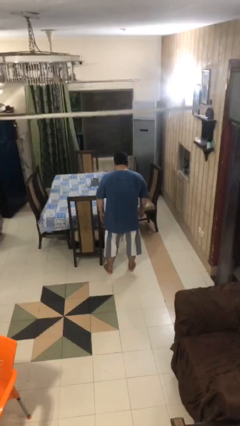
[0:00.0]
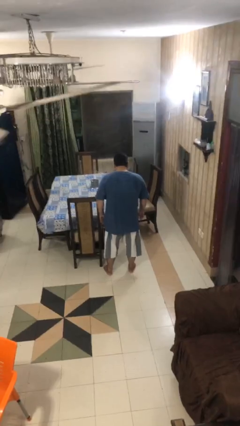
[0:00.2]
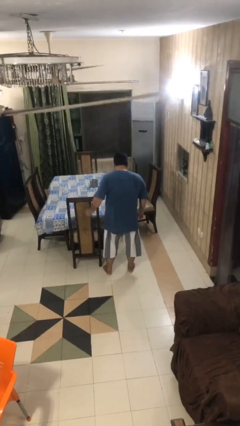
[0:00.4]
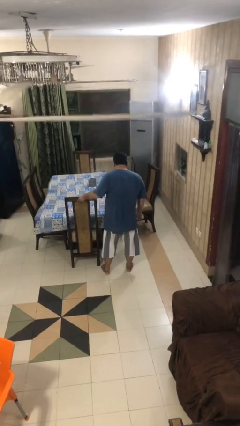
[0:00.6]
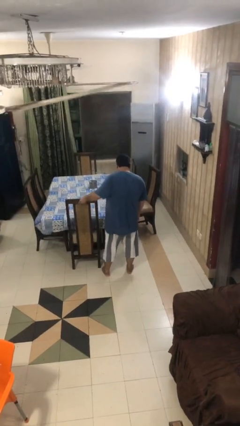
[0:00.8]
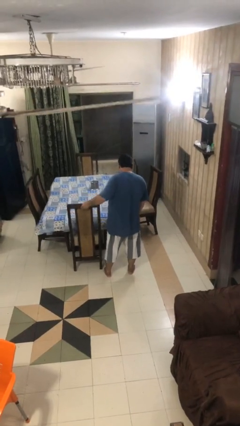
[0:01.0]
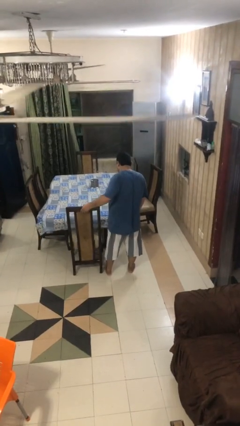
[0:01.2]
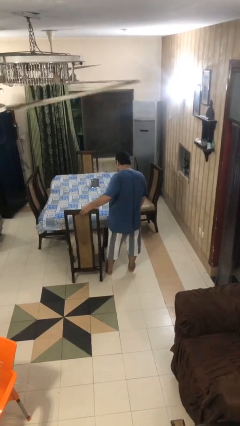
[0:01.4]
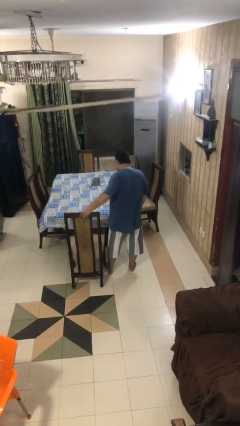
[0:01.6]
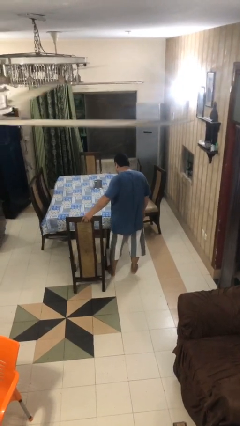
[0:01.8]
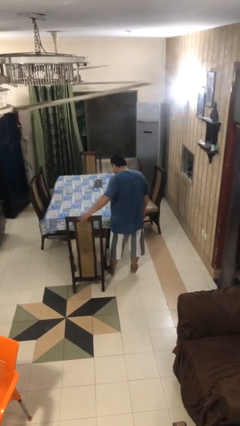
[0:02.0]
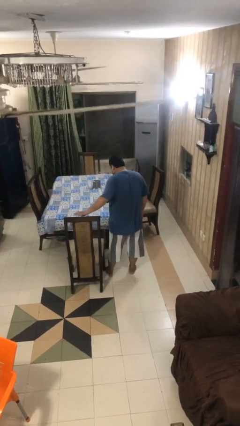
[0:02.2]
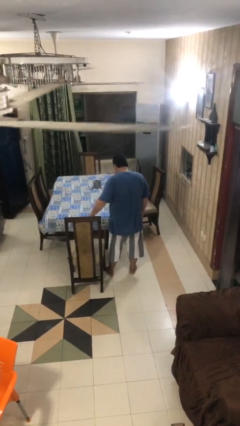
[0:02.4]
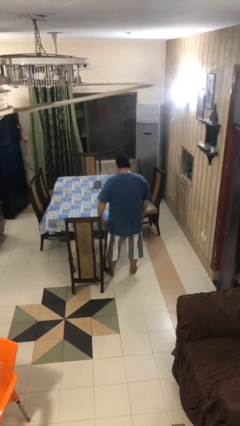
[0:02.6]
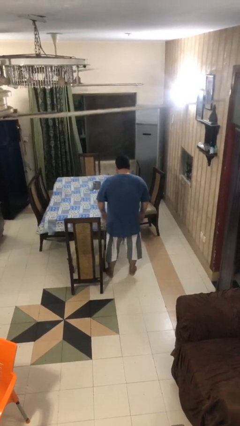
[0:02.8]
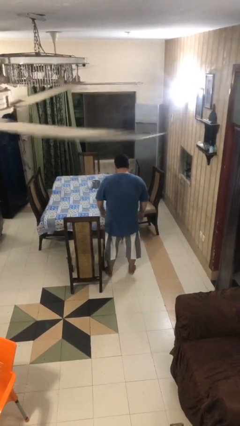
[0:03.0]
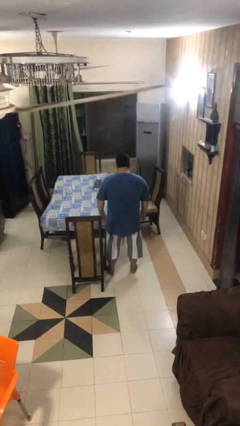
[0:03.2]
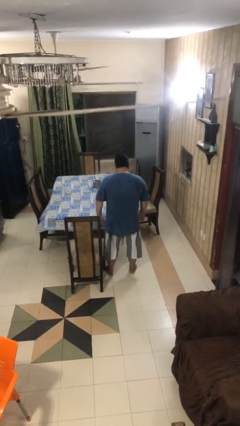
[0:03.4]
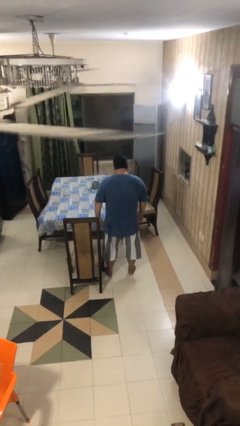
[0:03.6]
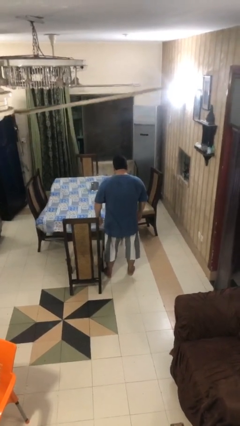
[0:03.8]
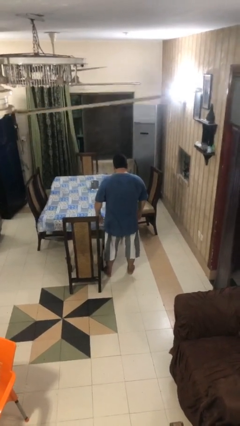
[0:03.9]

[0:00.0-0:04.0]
person pulls out chair

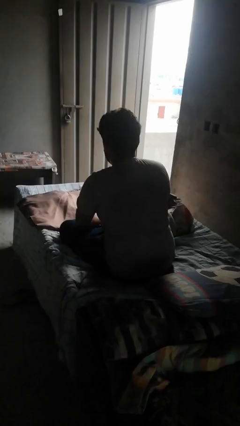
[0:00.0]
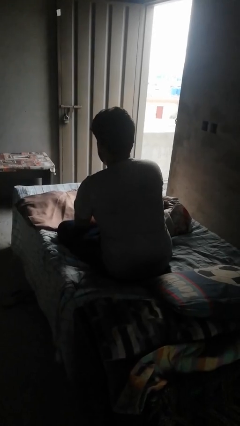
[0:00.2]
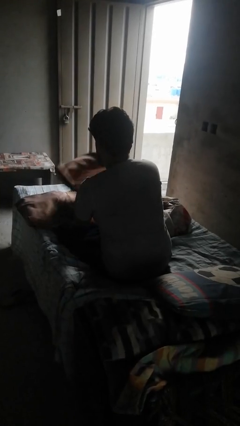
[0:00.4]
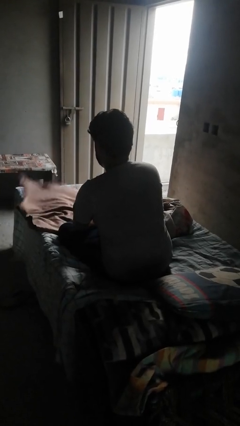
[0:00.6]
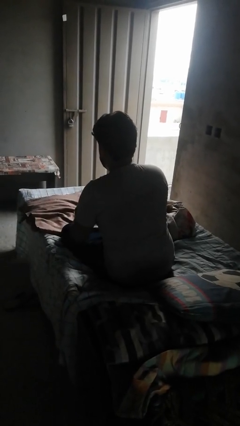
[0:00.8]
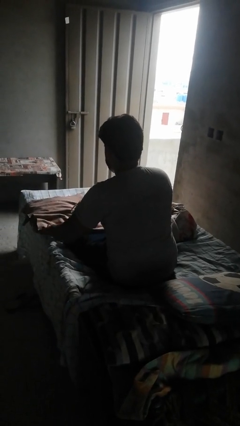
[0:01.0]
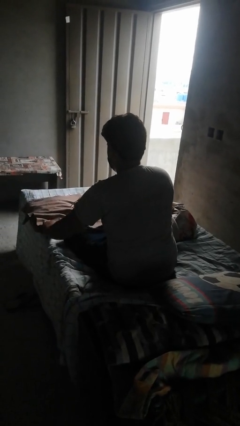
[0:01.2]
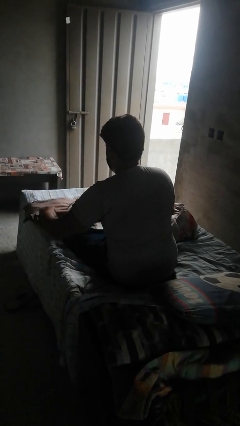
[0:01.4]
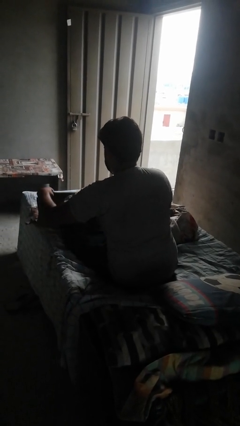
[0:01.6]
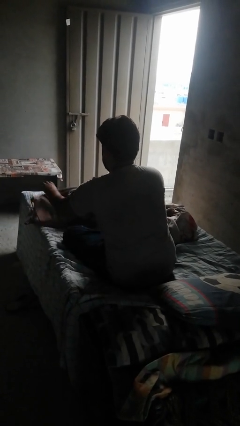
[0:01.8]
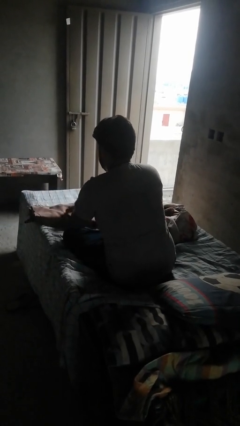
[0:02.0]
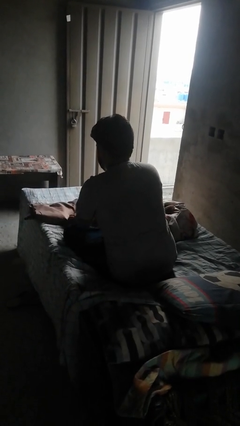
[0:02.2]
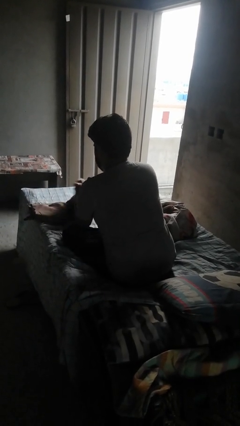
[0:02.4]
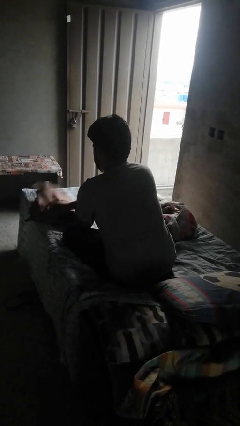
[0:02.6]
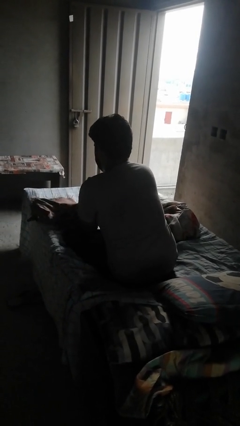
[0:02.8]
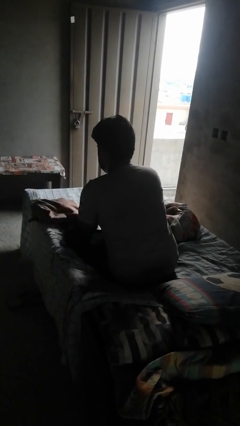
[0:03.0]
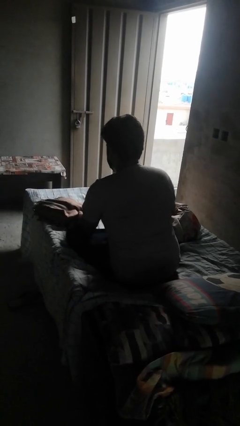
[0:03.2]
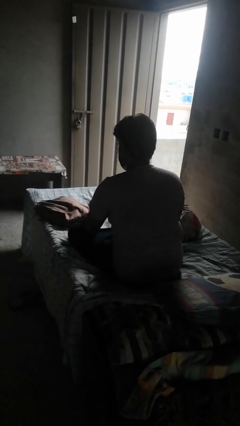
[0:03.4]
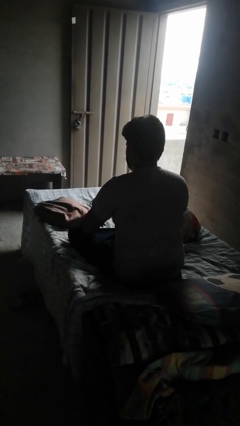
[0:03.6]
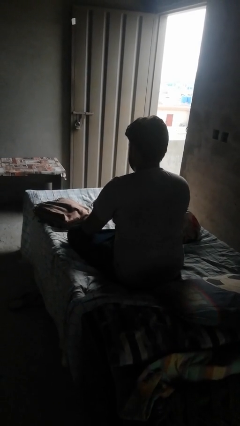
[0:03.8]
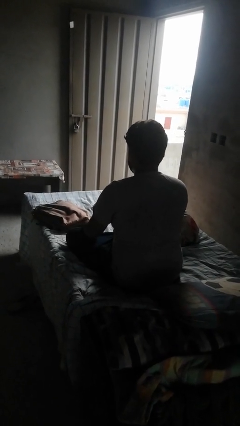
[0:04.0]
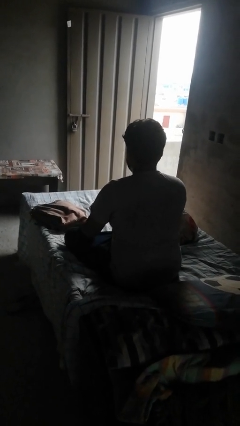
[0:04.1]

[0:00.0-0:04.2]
person folds blanket

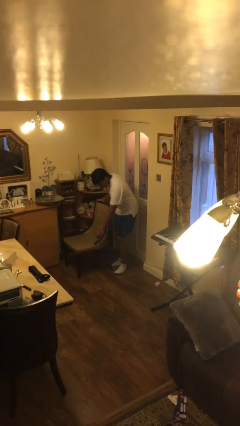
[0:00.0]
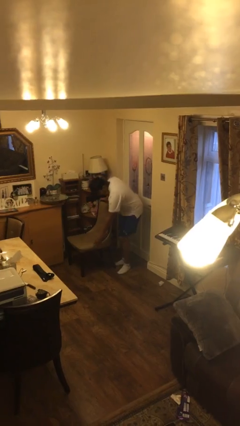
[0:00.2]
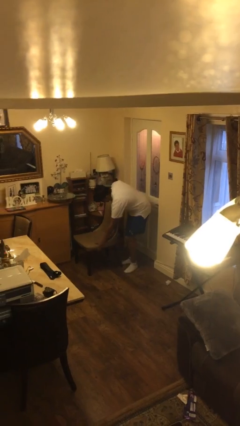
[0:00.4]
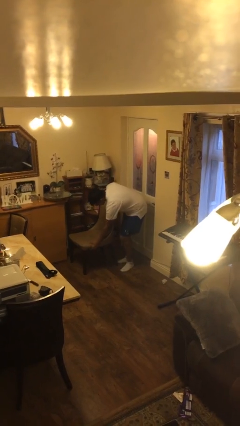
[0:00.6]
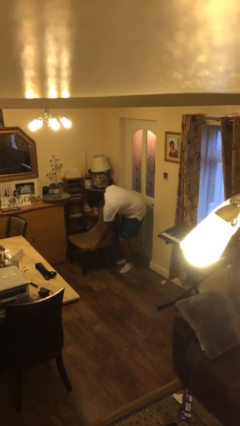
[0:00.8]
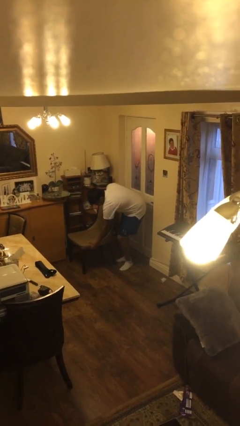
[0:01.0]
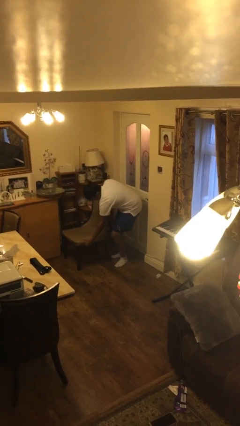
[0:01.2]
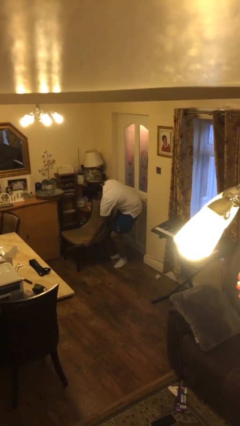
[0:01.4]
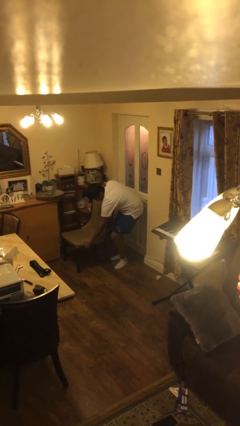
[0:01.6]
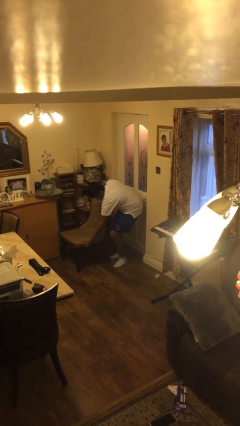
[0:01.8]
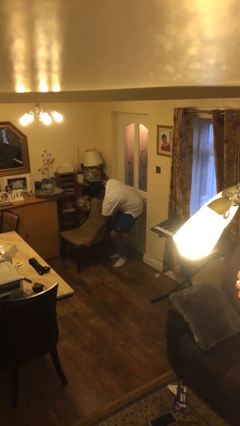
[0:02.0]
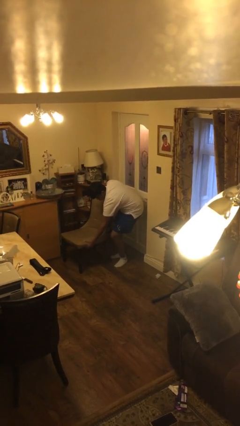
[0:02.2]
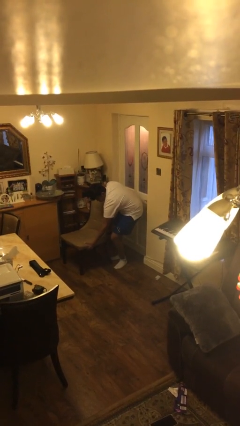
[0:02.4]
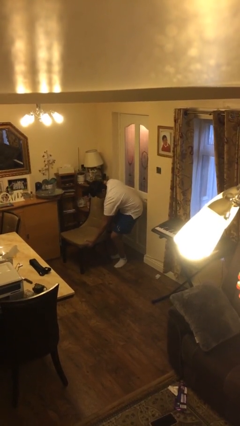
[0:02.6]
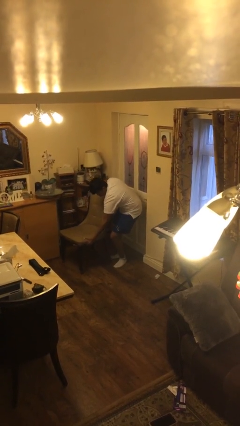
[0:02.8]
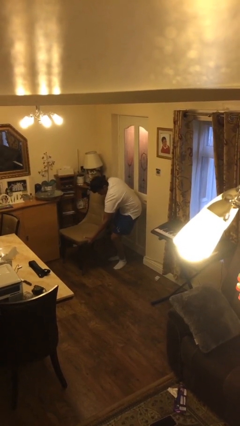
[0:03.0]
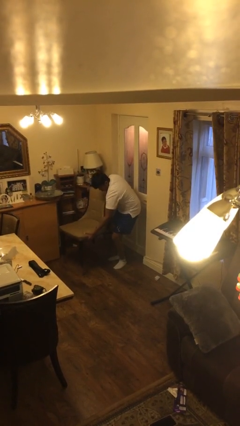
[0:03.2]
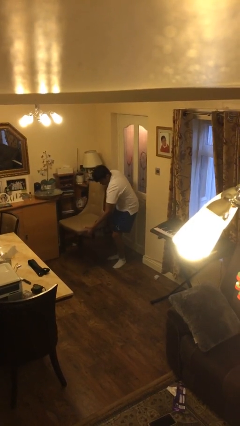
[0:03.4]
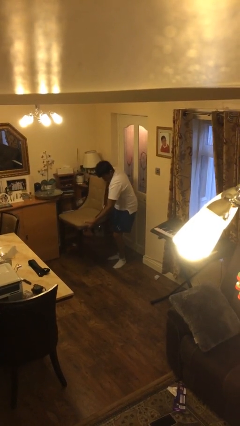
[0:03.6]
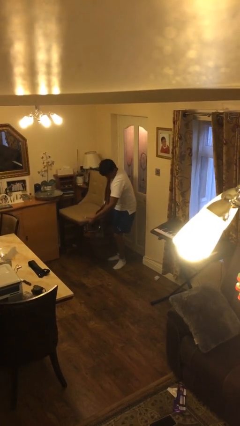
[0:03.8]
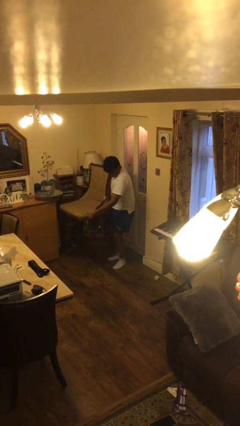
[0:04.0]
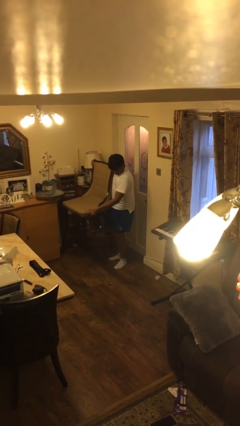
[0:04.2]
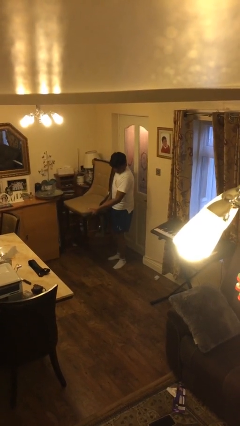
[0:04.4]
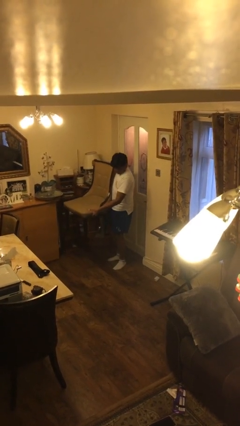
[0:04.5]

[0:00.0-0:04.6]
person picks up object from floor

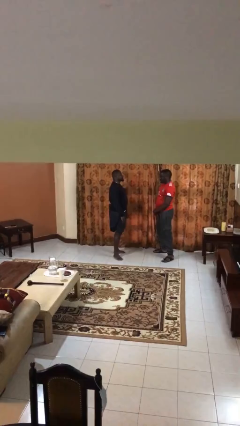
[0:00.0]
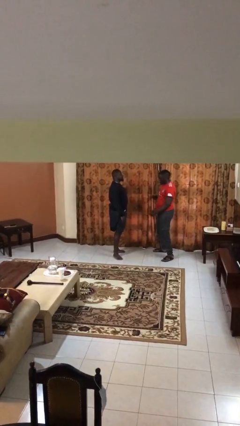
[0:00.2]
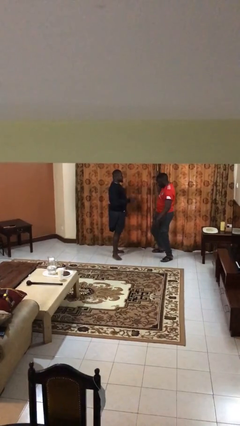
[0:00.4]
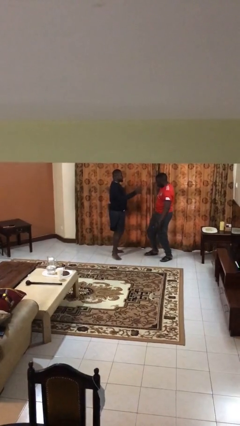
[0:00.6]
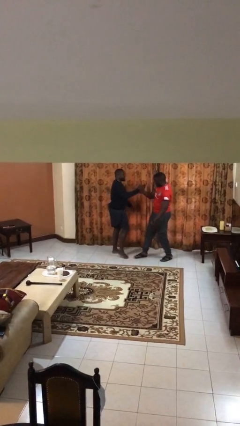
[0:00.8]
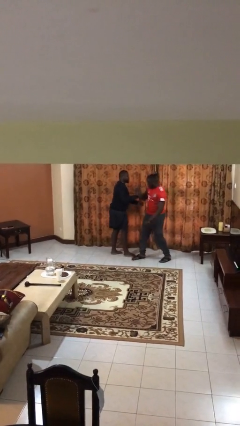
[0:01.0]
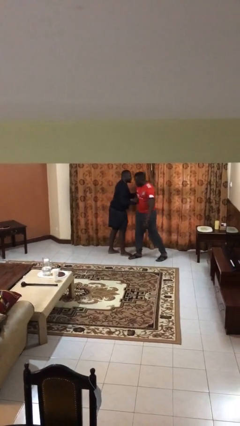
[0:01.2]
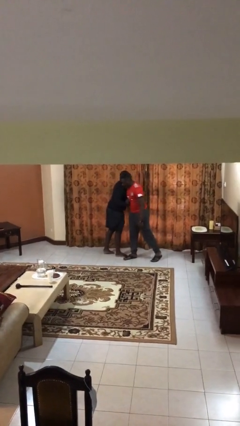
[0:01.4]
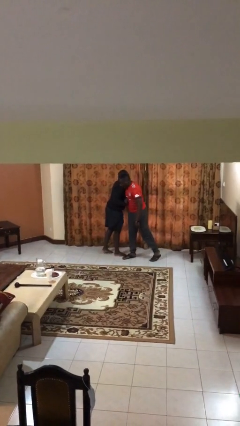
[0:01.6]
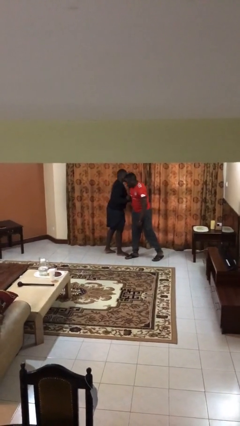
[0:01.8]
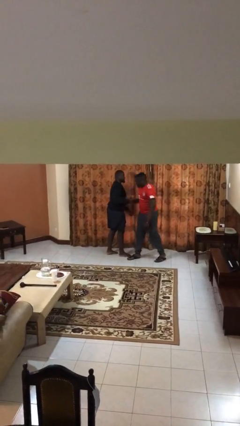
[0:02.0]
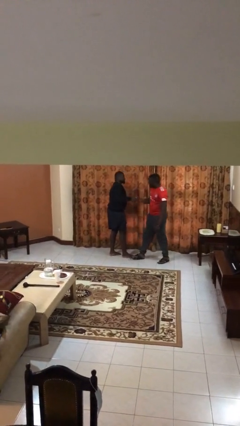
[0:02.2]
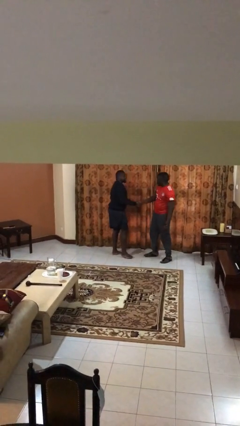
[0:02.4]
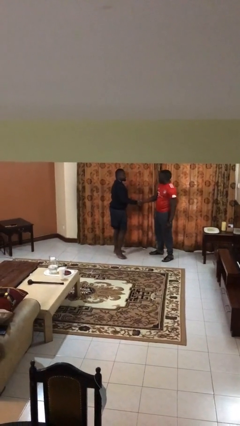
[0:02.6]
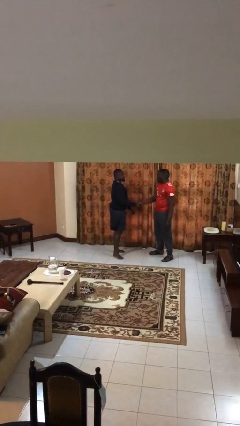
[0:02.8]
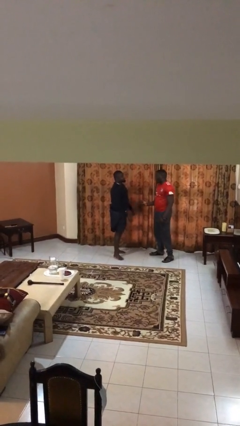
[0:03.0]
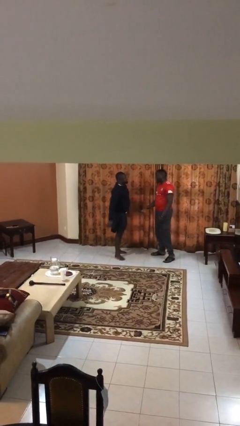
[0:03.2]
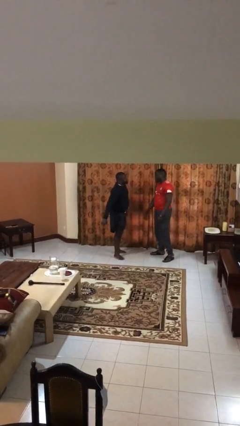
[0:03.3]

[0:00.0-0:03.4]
person embraces person

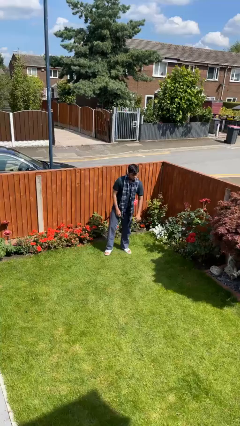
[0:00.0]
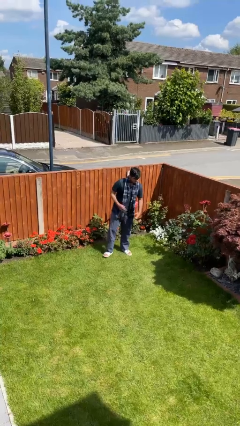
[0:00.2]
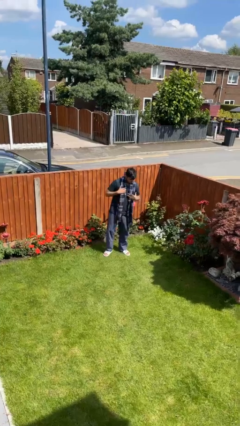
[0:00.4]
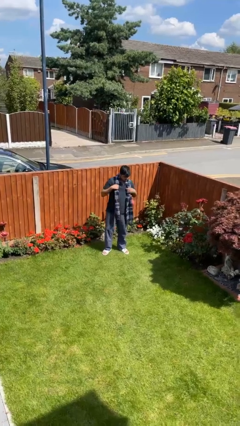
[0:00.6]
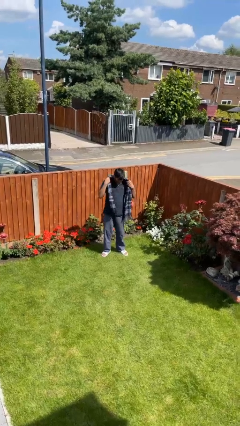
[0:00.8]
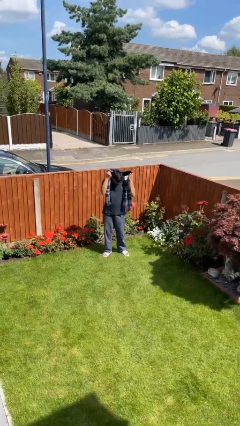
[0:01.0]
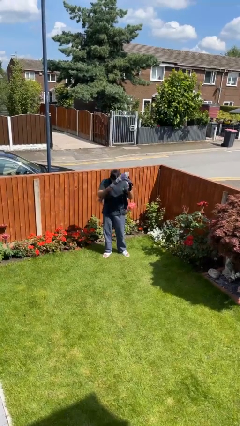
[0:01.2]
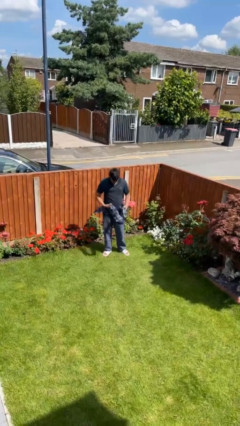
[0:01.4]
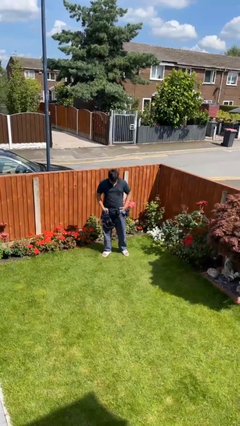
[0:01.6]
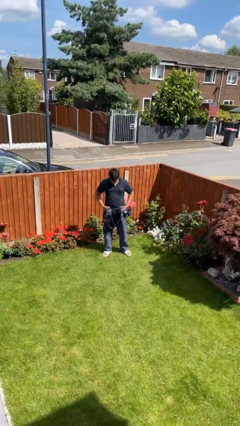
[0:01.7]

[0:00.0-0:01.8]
person takes off scarf
